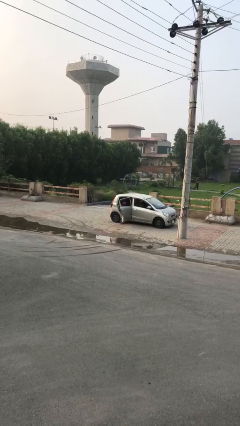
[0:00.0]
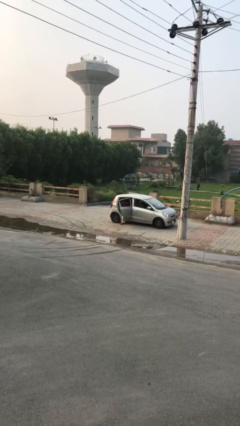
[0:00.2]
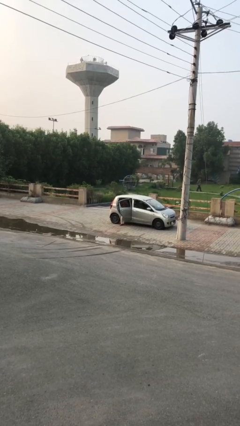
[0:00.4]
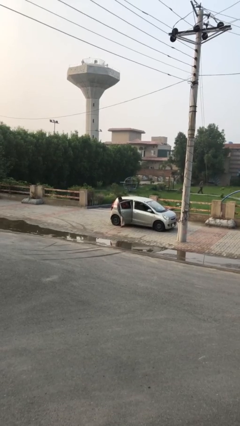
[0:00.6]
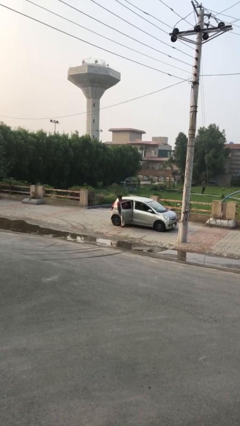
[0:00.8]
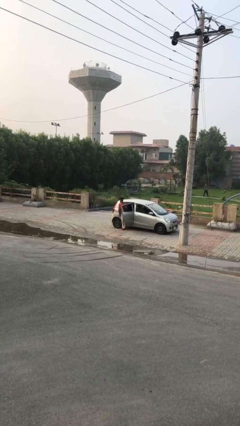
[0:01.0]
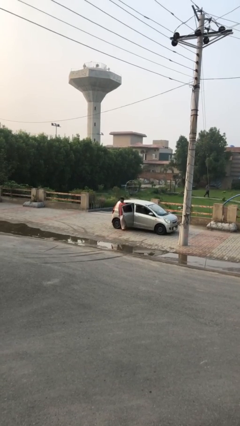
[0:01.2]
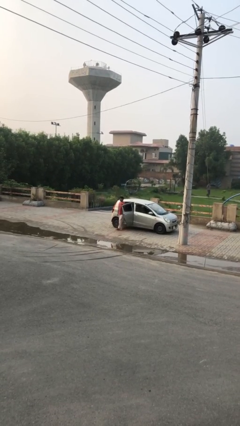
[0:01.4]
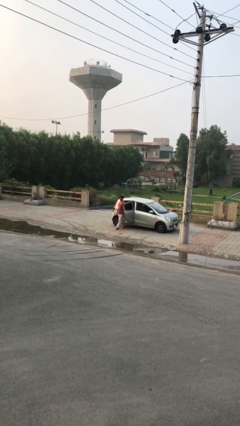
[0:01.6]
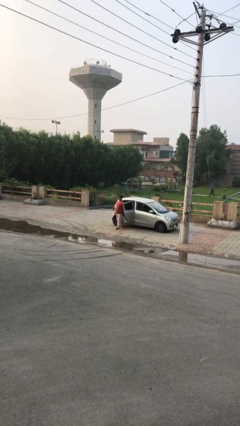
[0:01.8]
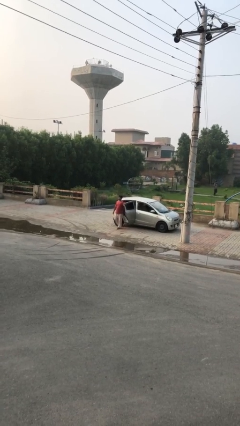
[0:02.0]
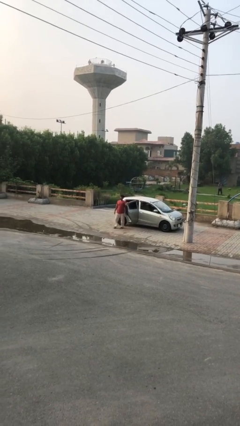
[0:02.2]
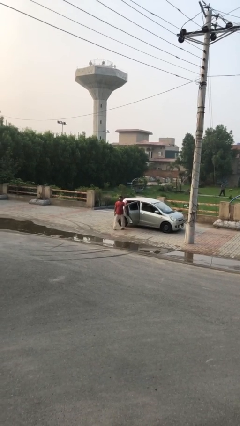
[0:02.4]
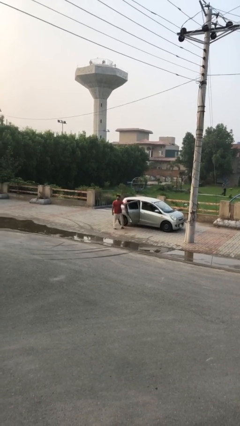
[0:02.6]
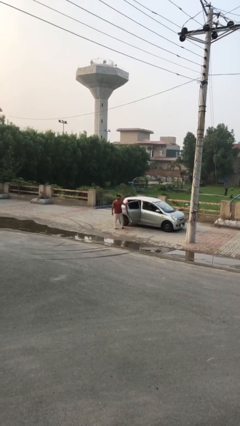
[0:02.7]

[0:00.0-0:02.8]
person exits car

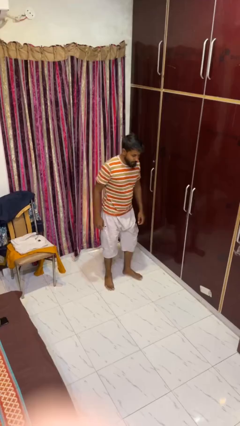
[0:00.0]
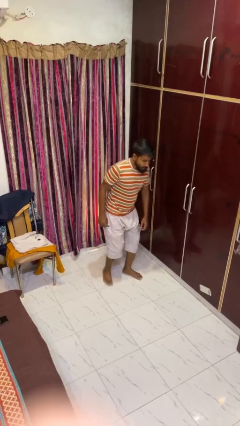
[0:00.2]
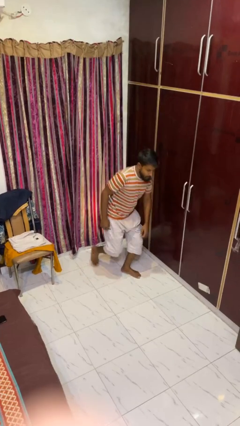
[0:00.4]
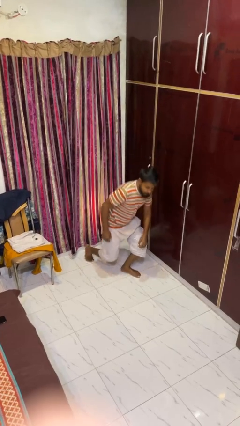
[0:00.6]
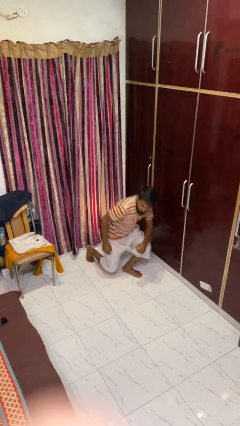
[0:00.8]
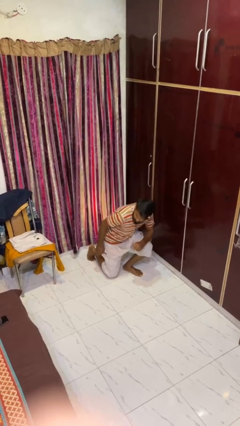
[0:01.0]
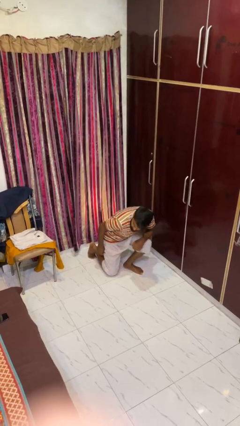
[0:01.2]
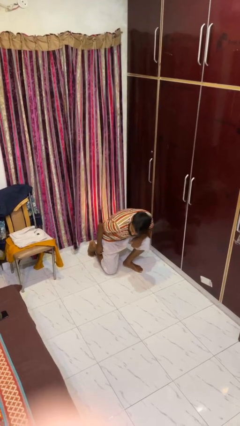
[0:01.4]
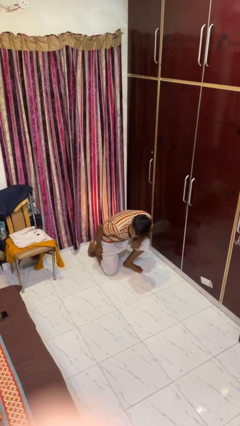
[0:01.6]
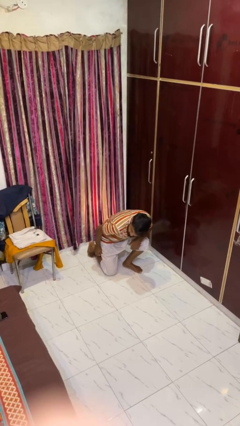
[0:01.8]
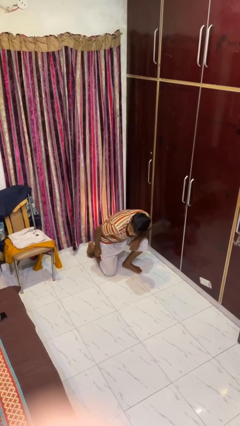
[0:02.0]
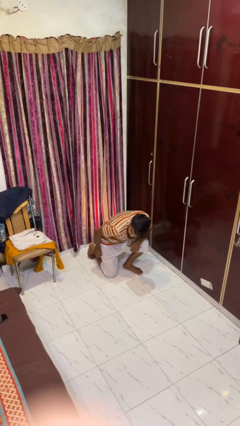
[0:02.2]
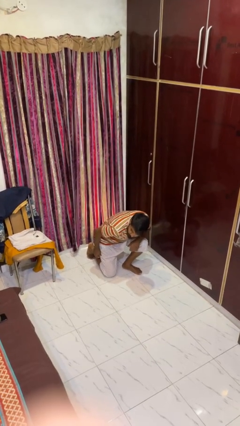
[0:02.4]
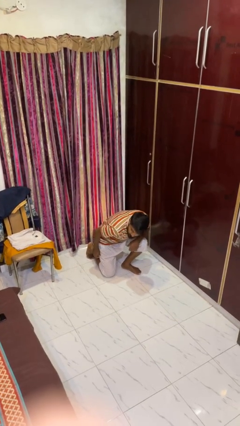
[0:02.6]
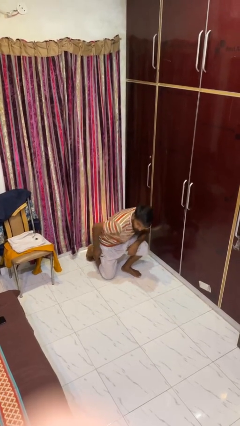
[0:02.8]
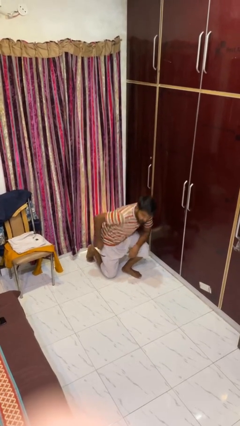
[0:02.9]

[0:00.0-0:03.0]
person kneels

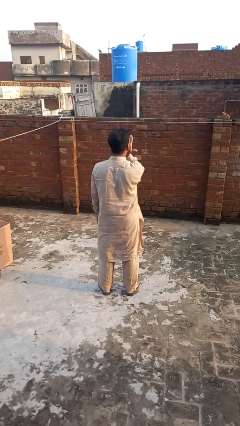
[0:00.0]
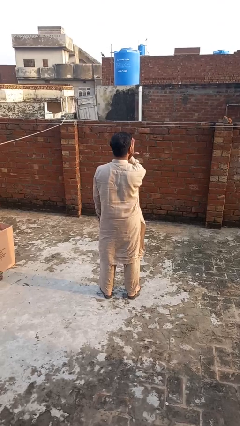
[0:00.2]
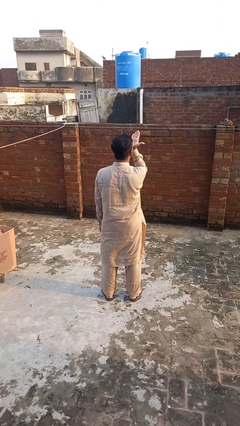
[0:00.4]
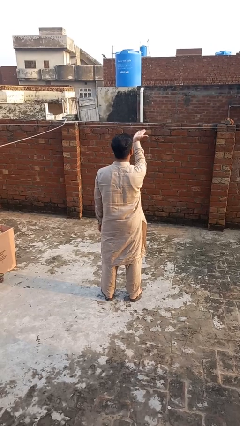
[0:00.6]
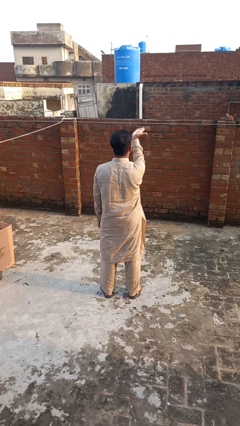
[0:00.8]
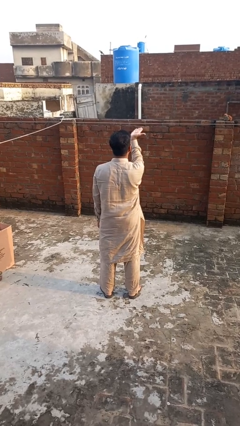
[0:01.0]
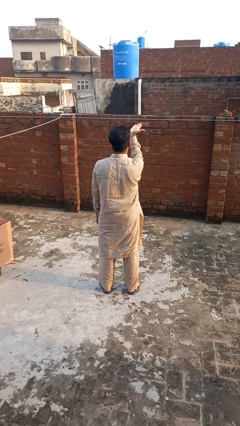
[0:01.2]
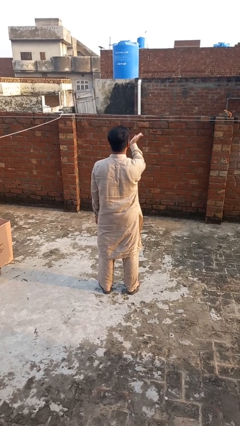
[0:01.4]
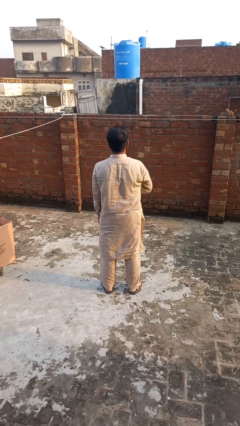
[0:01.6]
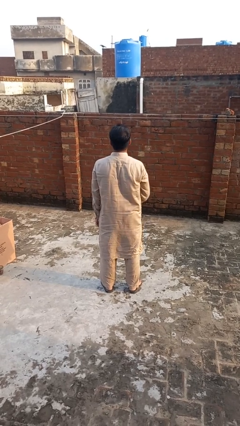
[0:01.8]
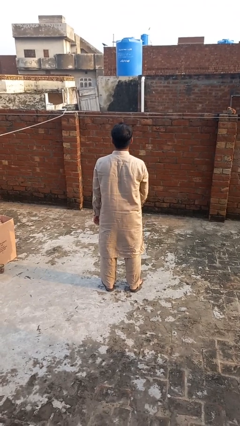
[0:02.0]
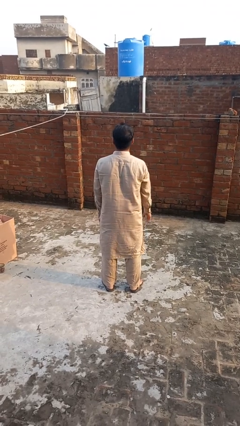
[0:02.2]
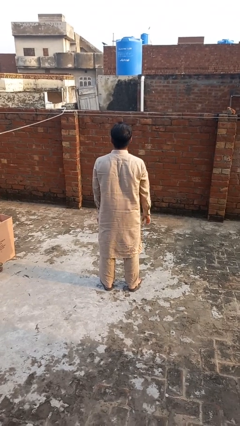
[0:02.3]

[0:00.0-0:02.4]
person gestures blow kiss

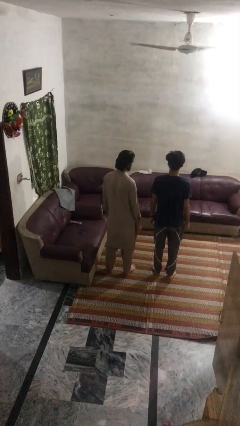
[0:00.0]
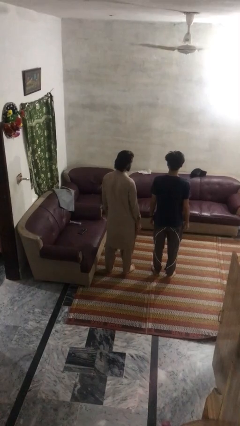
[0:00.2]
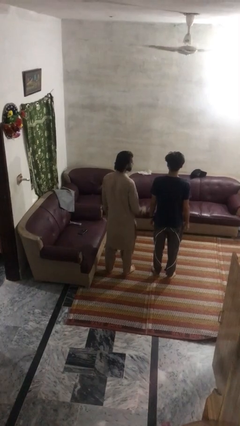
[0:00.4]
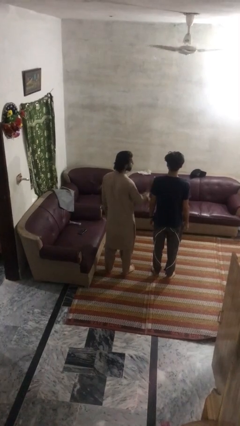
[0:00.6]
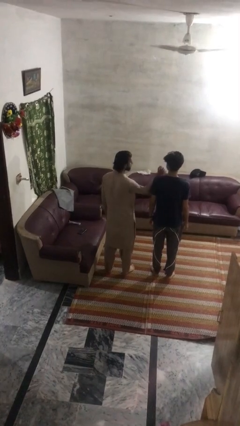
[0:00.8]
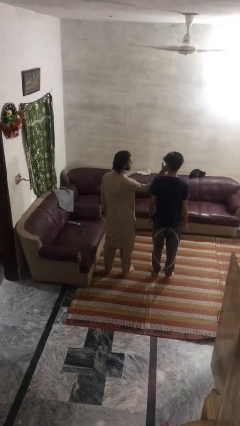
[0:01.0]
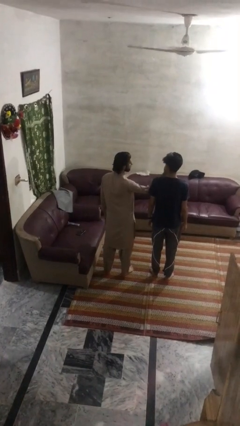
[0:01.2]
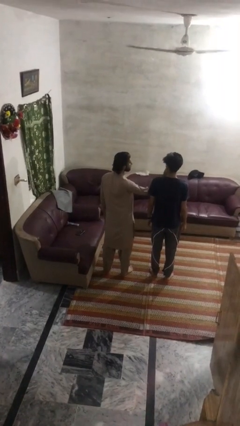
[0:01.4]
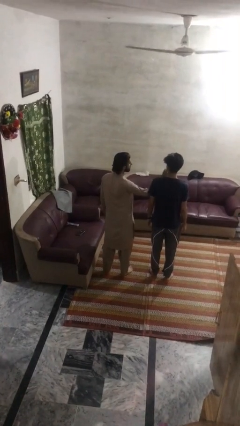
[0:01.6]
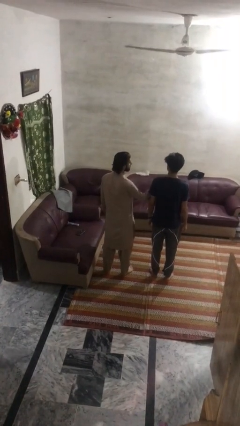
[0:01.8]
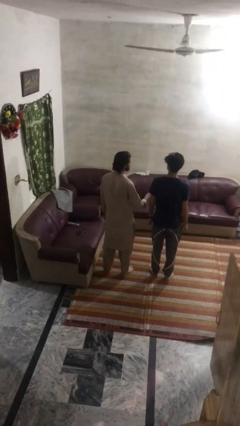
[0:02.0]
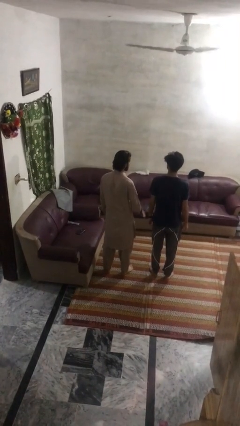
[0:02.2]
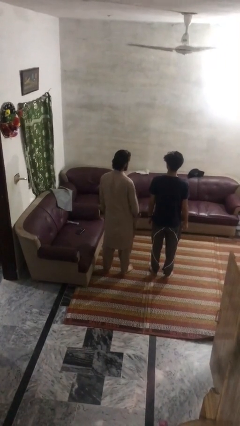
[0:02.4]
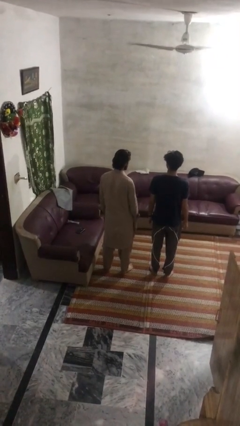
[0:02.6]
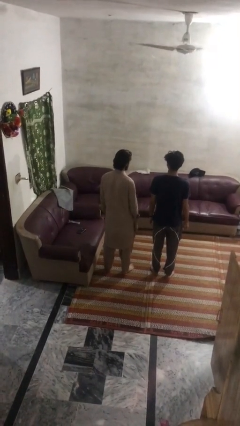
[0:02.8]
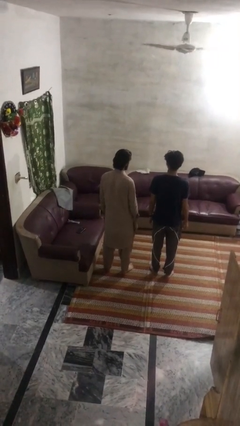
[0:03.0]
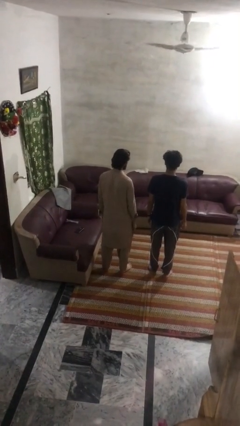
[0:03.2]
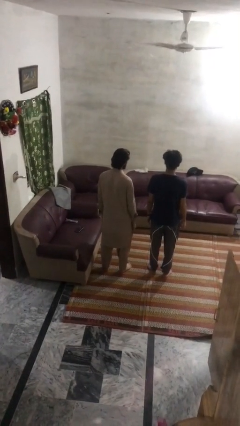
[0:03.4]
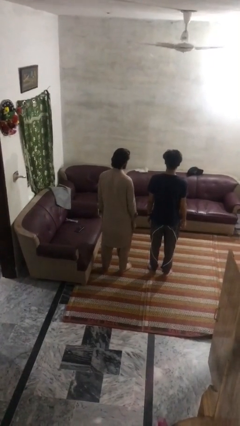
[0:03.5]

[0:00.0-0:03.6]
person touches face of person

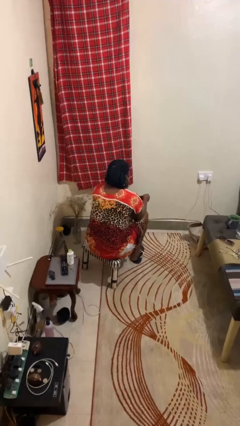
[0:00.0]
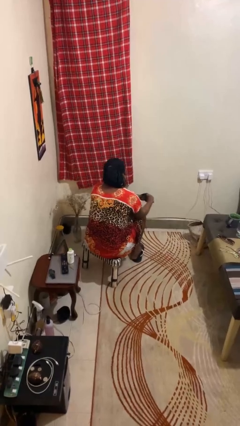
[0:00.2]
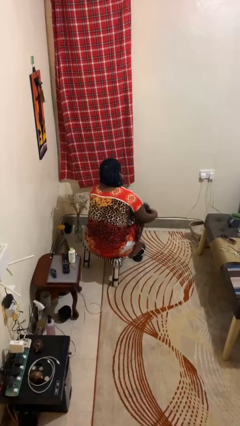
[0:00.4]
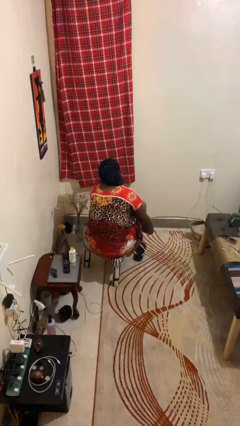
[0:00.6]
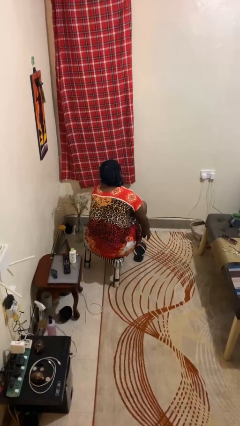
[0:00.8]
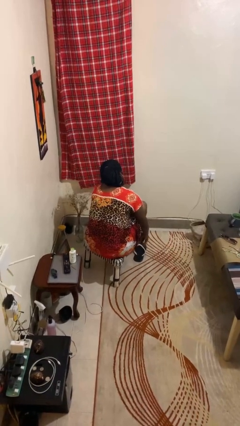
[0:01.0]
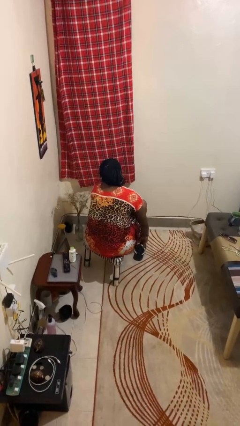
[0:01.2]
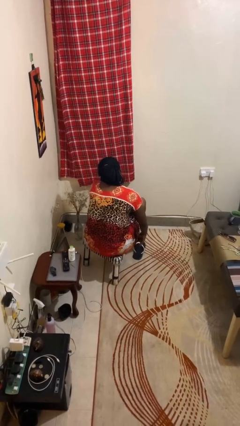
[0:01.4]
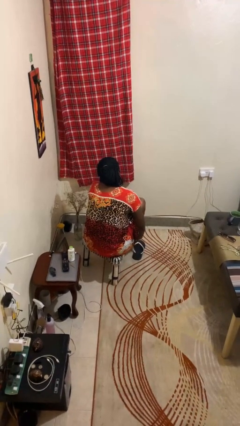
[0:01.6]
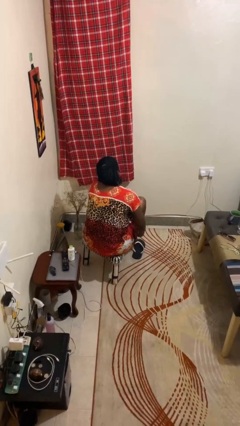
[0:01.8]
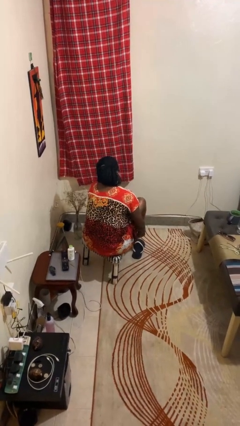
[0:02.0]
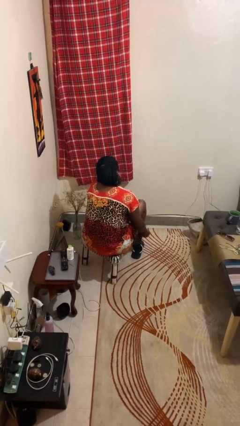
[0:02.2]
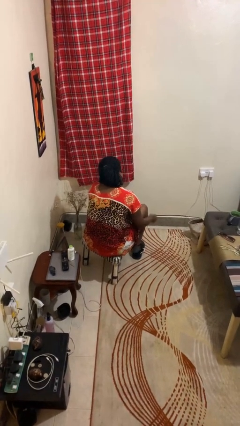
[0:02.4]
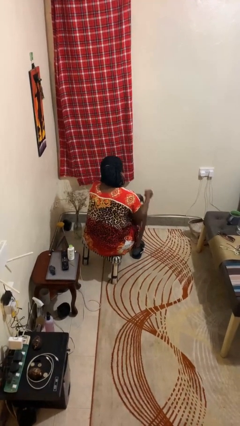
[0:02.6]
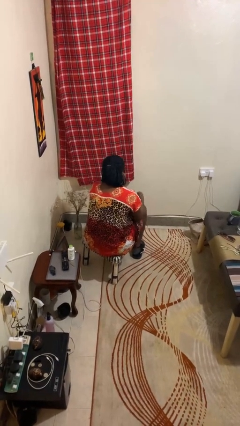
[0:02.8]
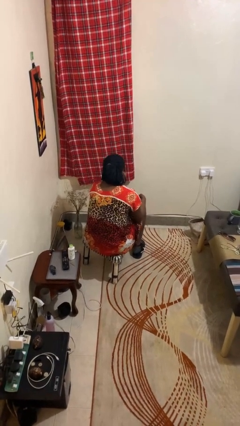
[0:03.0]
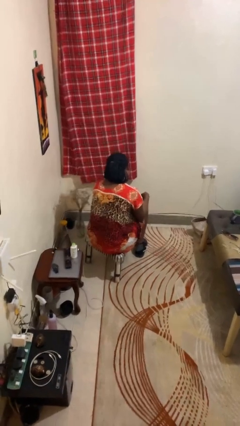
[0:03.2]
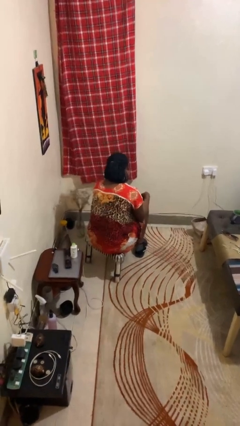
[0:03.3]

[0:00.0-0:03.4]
person puts on socks

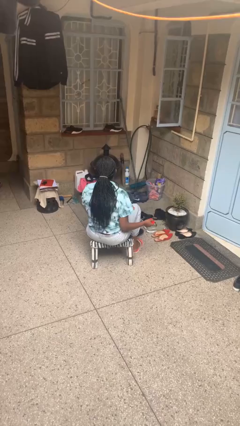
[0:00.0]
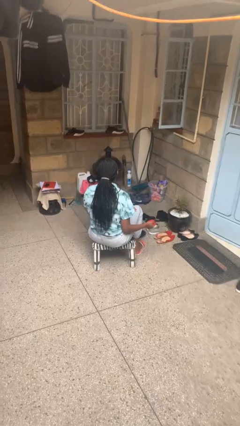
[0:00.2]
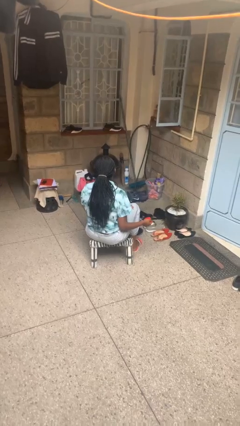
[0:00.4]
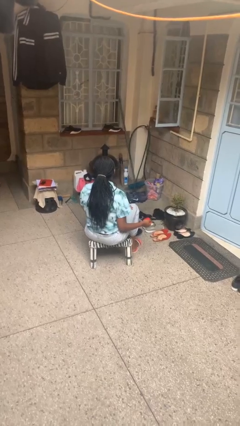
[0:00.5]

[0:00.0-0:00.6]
person picks up object from floor

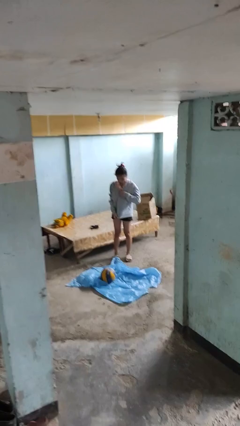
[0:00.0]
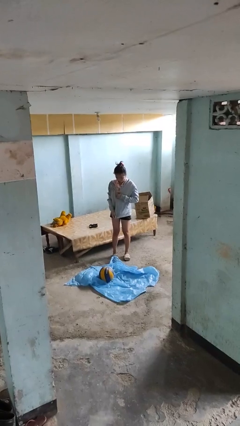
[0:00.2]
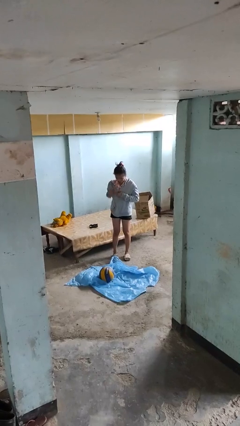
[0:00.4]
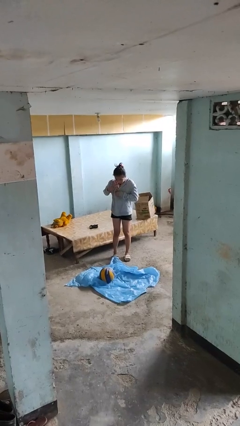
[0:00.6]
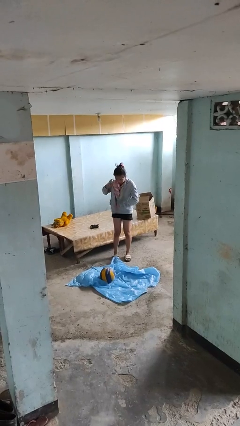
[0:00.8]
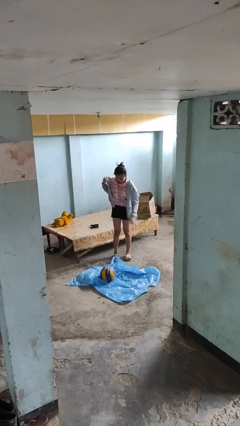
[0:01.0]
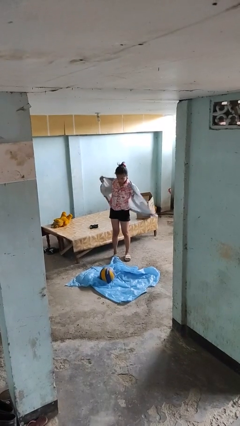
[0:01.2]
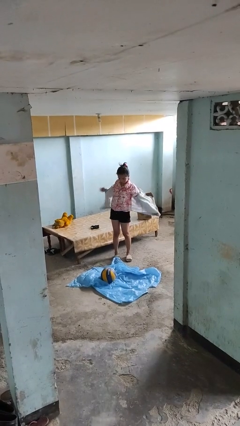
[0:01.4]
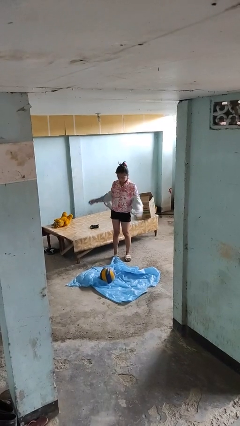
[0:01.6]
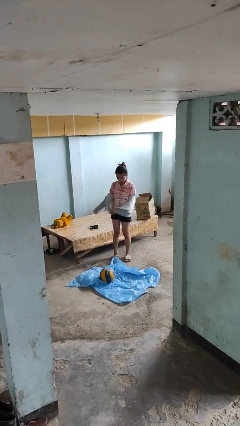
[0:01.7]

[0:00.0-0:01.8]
person unzips jacket
